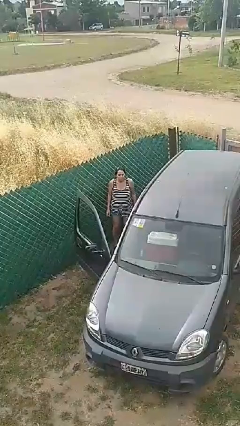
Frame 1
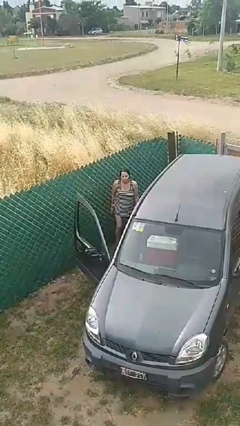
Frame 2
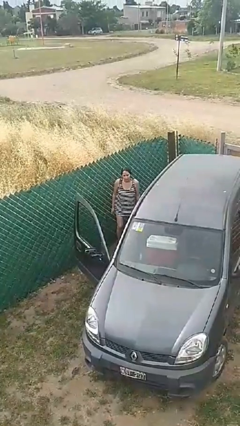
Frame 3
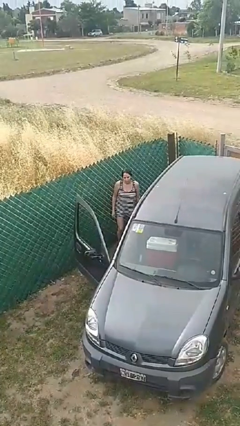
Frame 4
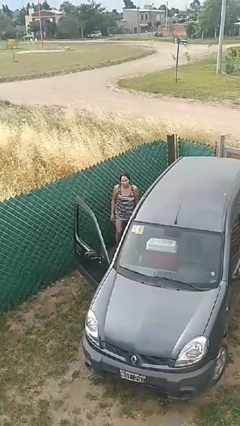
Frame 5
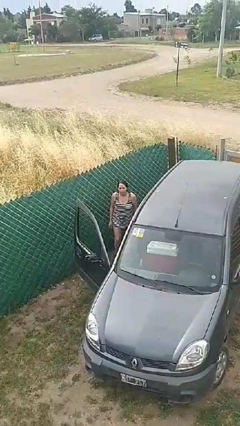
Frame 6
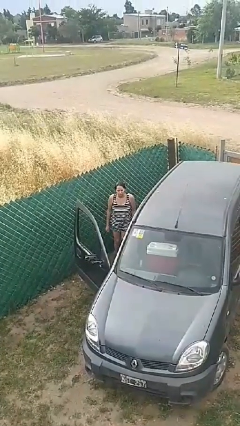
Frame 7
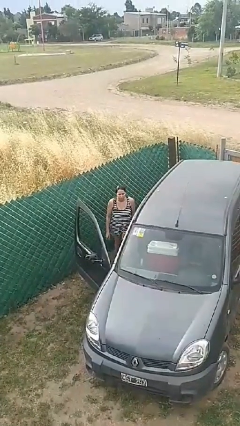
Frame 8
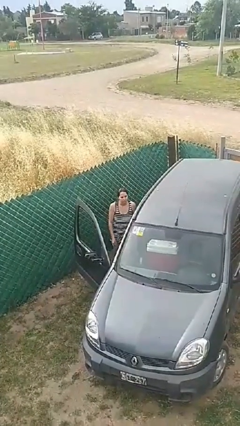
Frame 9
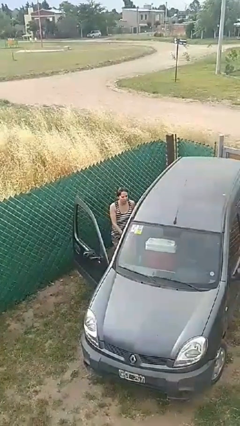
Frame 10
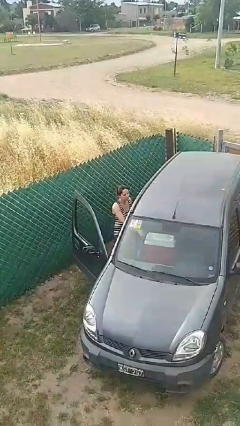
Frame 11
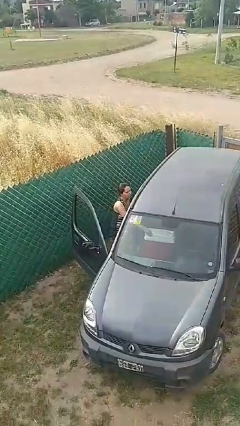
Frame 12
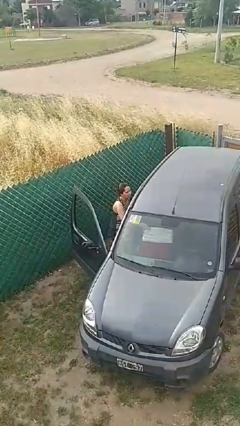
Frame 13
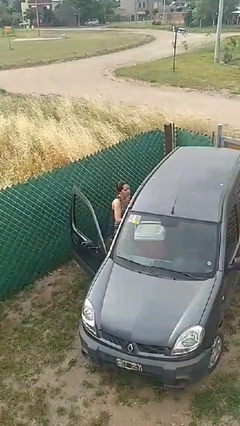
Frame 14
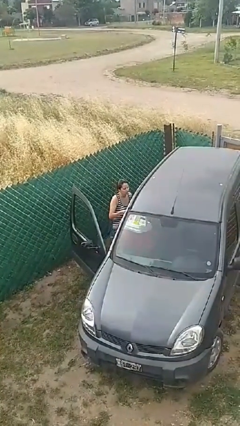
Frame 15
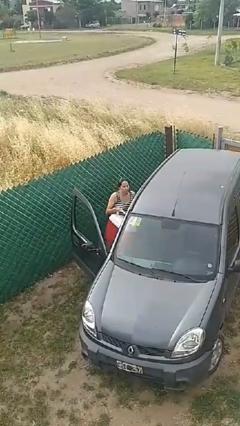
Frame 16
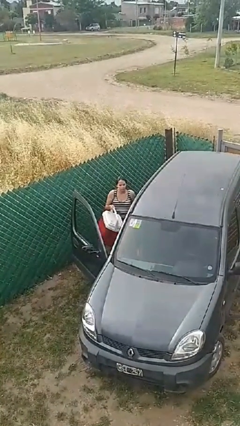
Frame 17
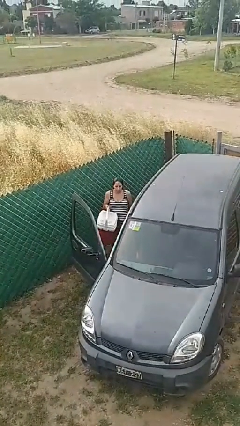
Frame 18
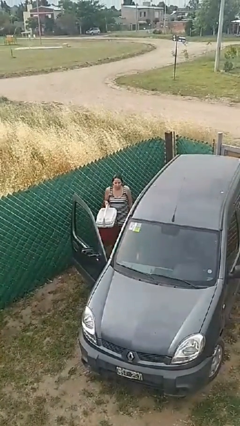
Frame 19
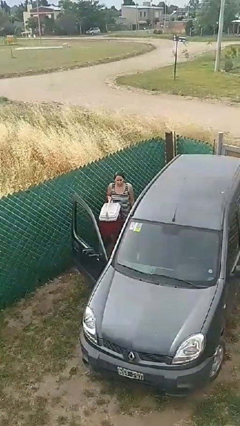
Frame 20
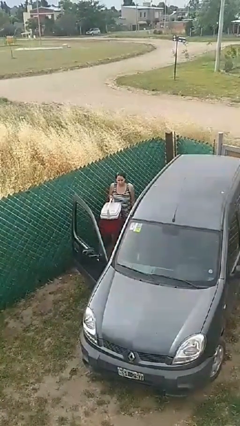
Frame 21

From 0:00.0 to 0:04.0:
person unloads car

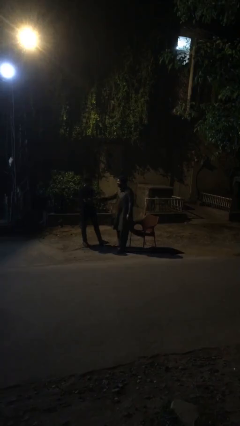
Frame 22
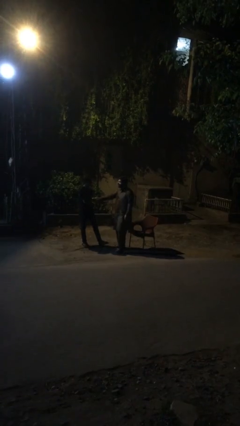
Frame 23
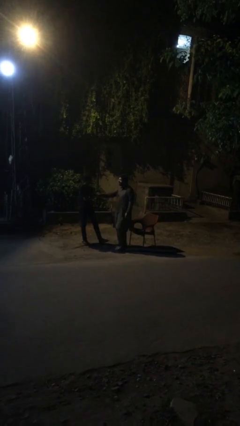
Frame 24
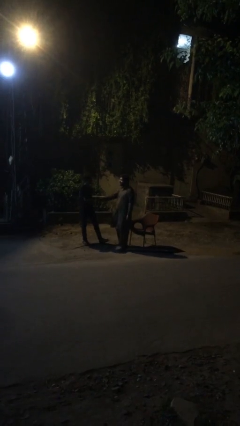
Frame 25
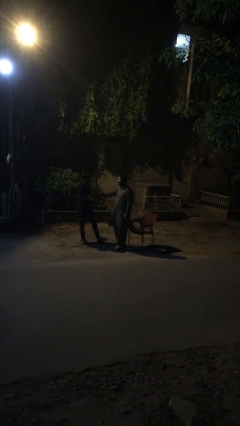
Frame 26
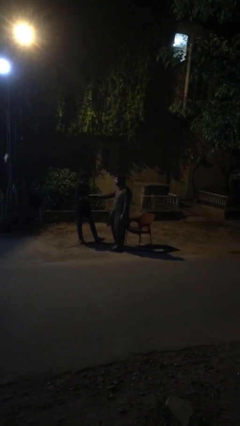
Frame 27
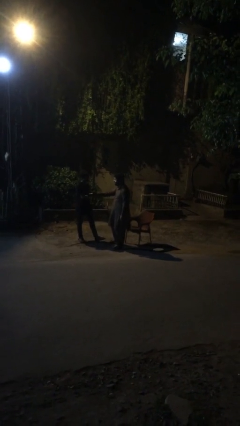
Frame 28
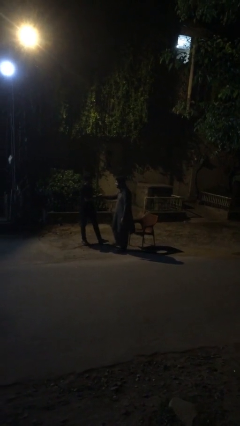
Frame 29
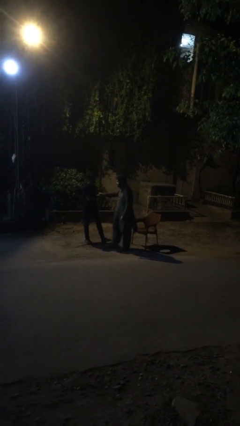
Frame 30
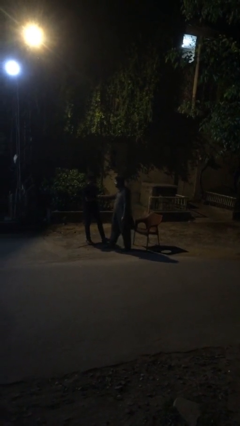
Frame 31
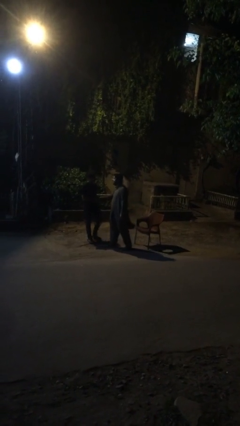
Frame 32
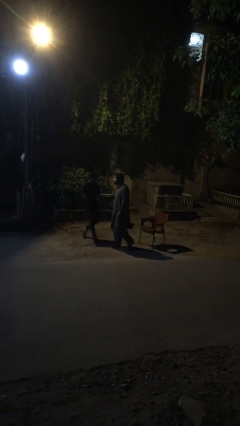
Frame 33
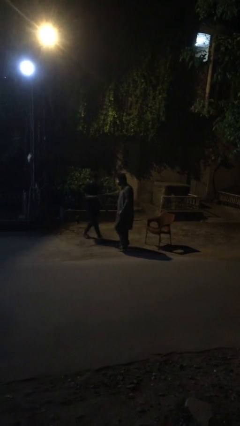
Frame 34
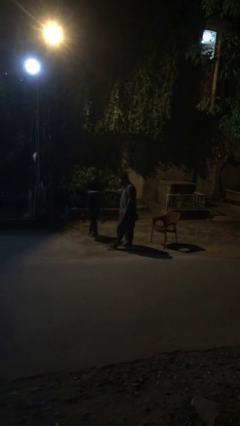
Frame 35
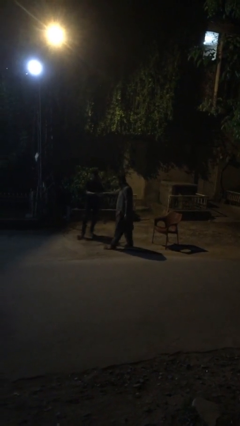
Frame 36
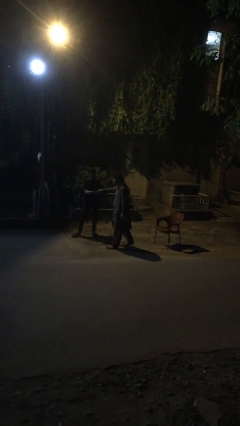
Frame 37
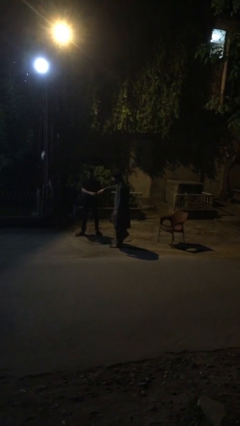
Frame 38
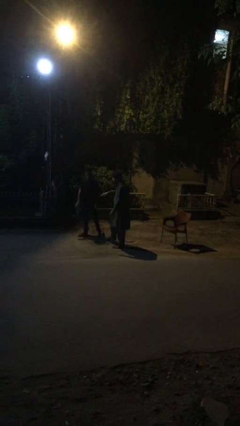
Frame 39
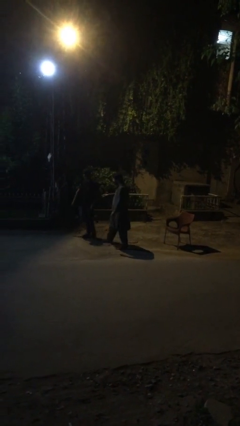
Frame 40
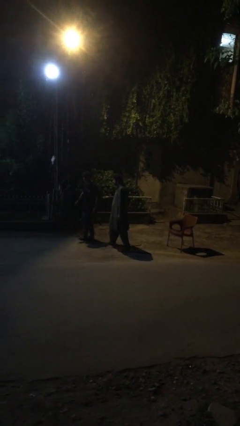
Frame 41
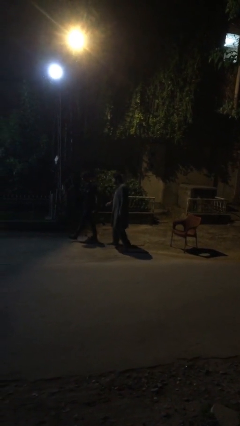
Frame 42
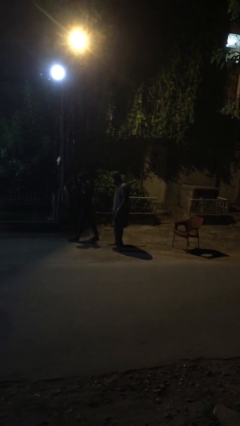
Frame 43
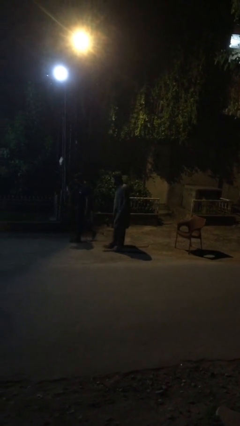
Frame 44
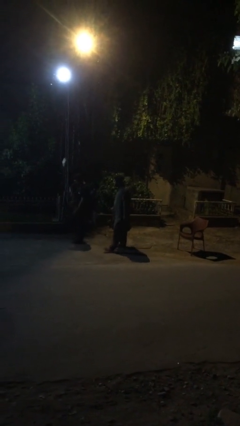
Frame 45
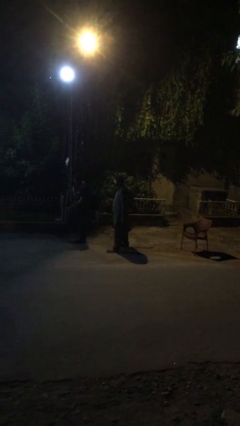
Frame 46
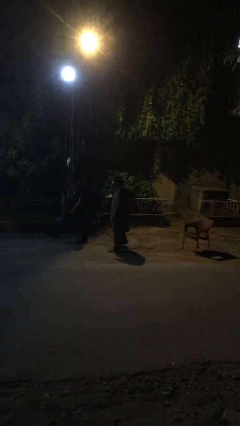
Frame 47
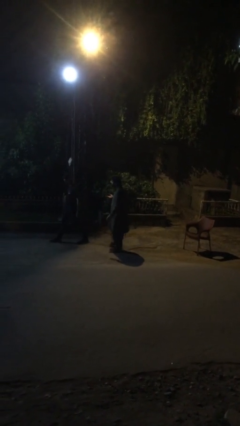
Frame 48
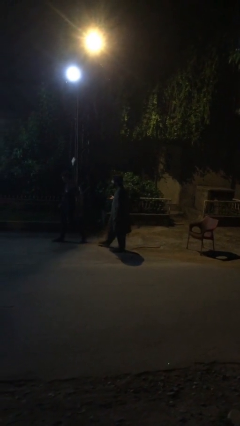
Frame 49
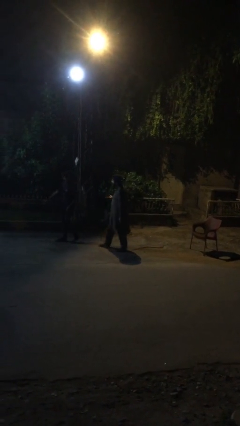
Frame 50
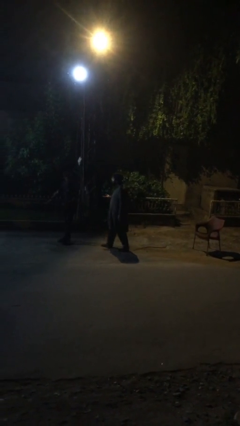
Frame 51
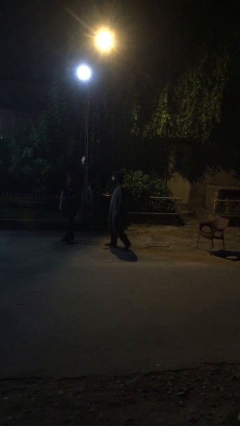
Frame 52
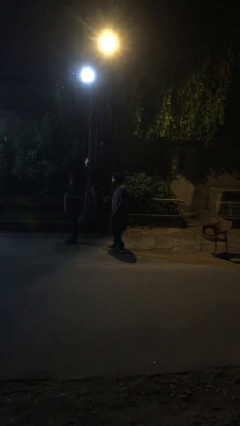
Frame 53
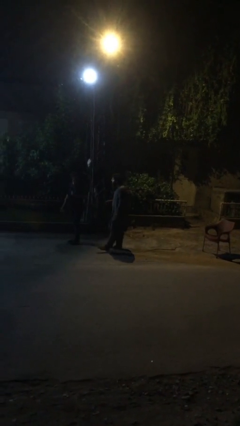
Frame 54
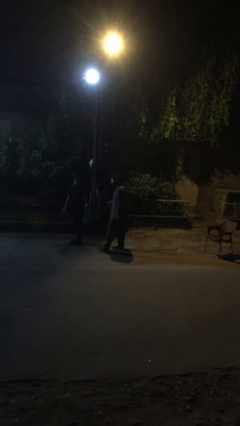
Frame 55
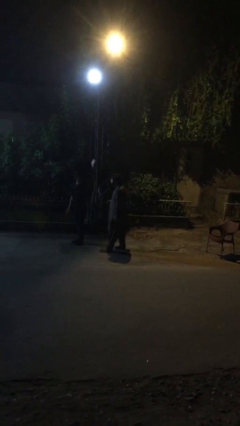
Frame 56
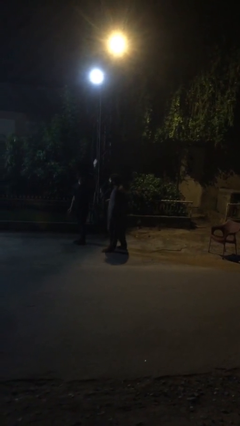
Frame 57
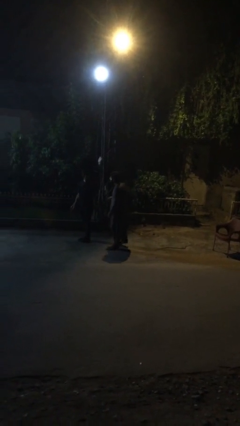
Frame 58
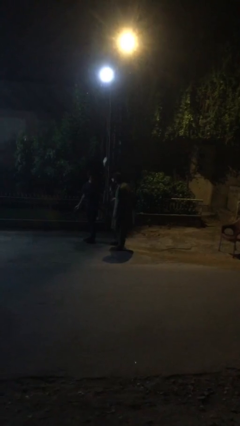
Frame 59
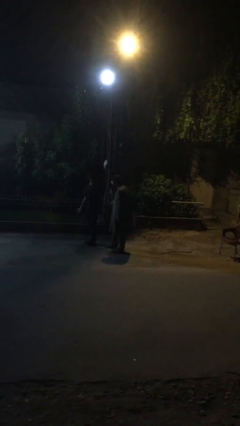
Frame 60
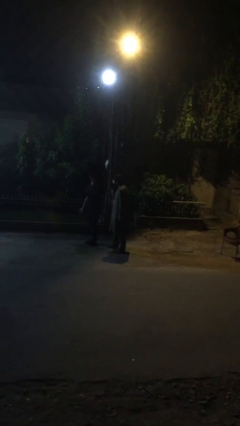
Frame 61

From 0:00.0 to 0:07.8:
person talks to person

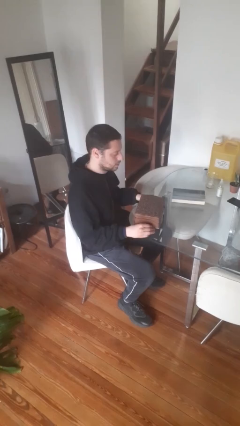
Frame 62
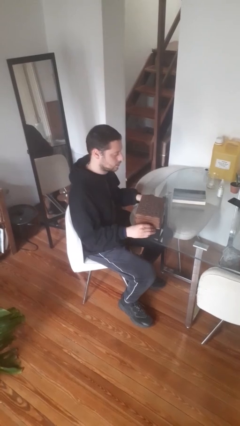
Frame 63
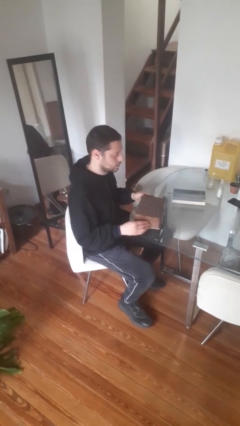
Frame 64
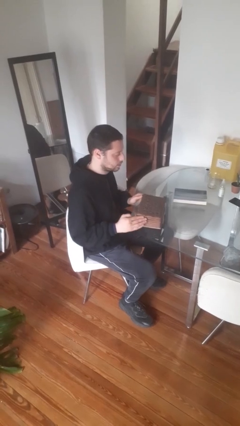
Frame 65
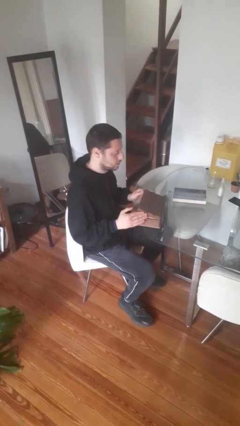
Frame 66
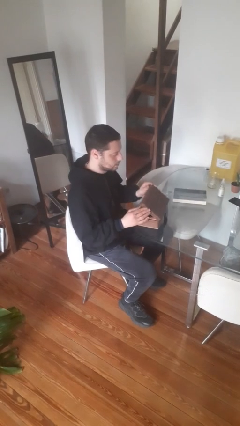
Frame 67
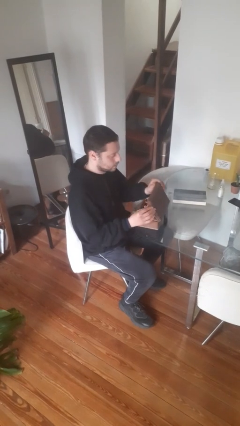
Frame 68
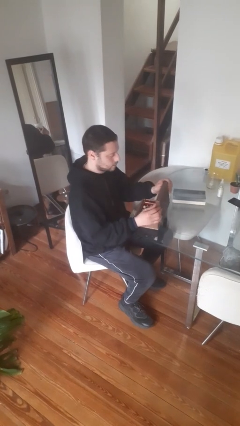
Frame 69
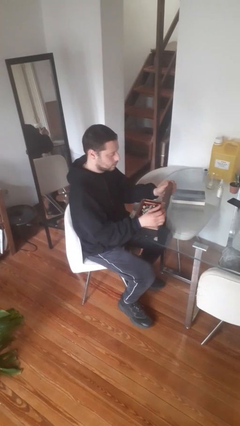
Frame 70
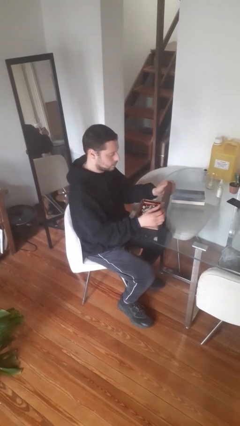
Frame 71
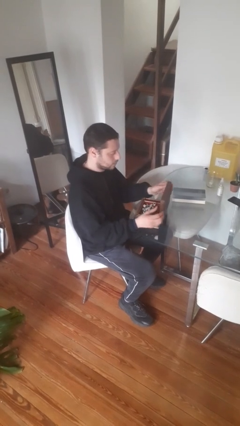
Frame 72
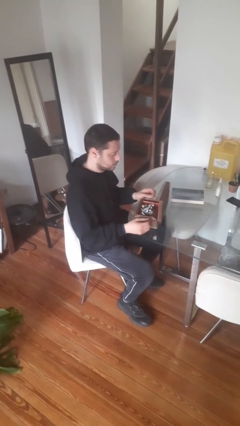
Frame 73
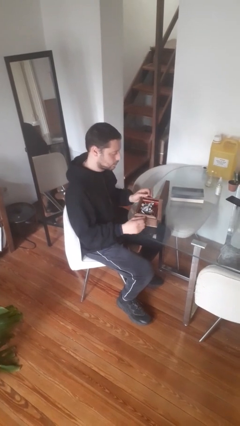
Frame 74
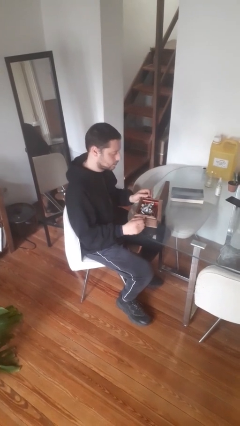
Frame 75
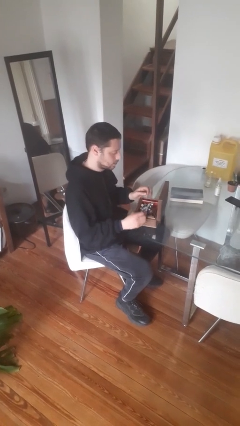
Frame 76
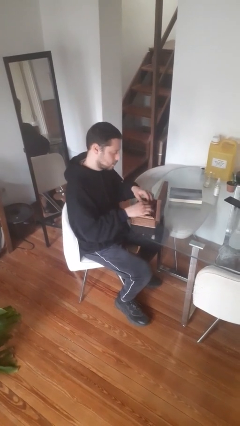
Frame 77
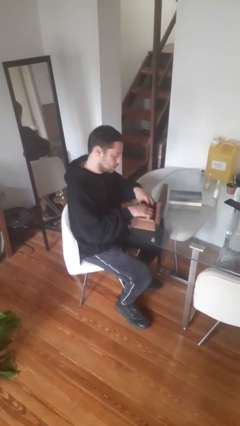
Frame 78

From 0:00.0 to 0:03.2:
person opens jewelry box

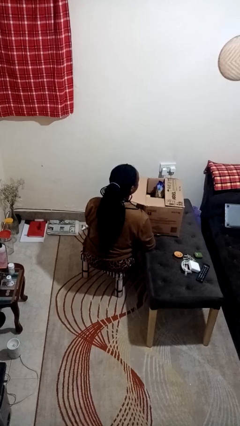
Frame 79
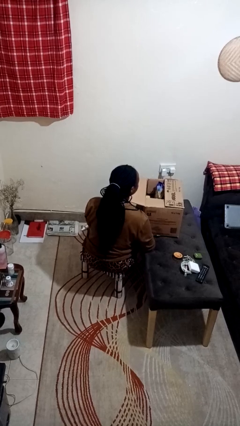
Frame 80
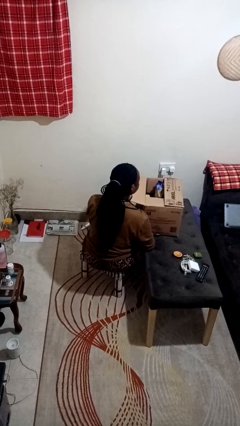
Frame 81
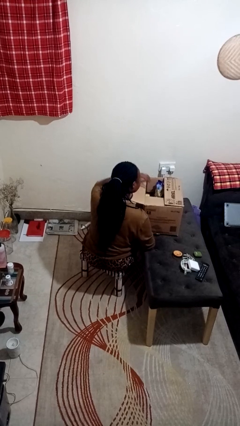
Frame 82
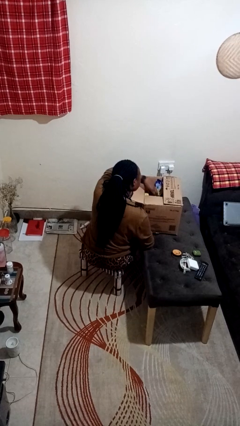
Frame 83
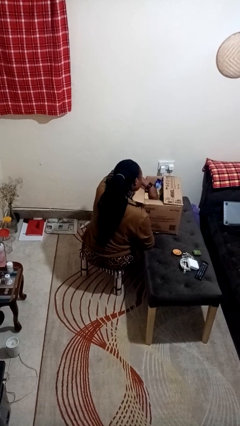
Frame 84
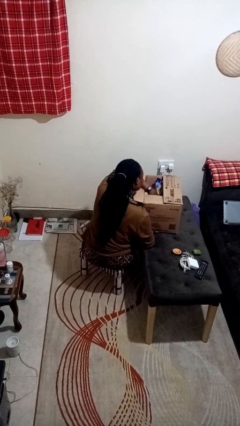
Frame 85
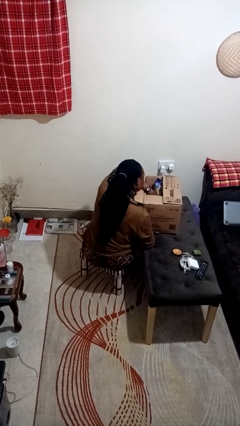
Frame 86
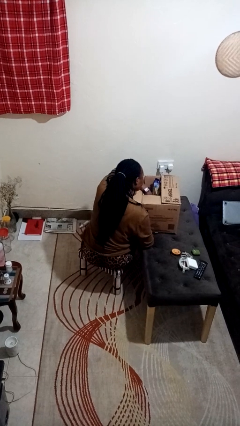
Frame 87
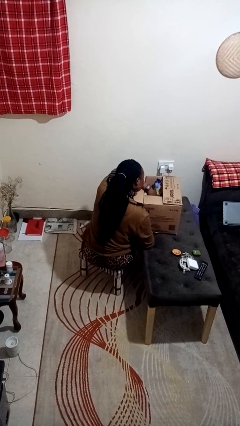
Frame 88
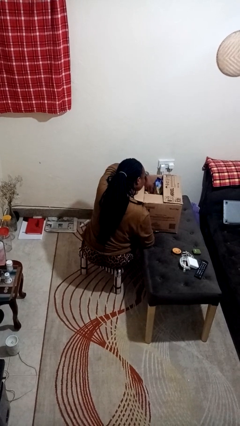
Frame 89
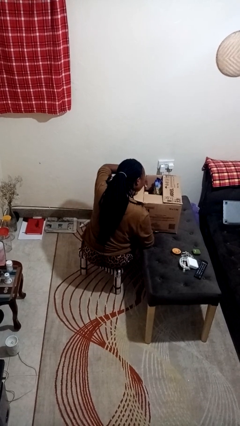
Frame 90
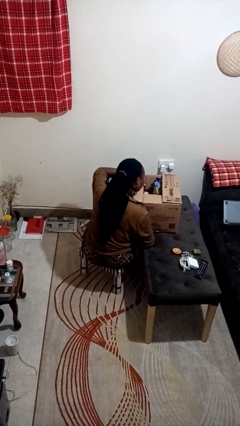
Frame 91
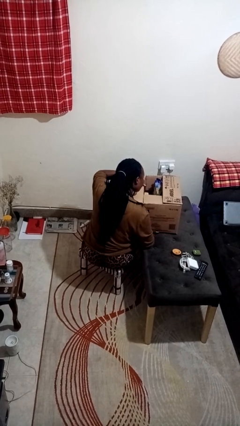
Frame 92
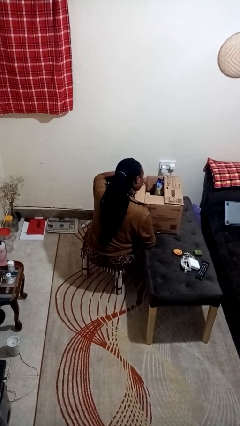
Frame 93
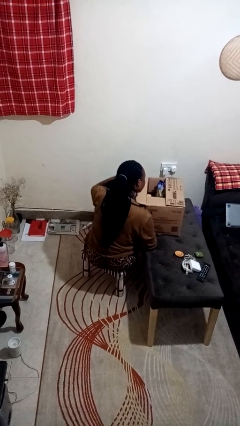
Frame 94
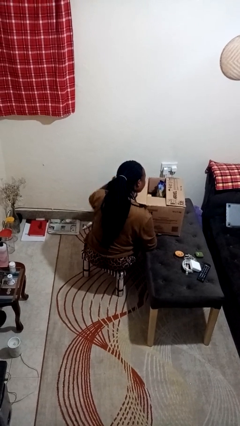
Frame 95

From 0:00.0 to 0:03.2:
person searches in box
